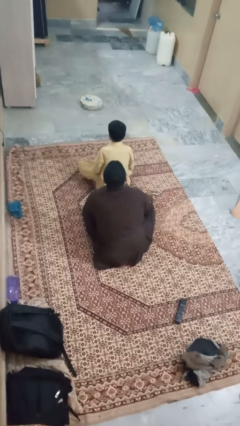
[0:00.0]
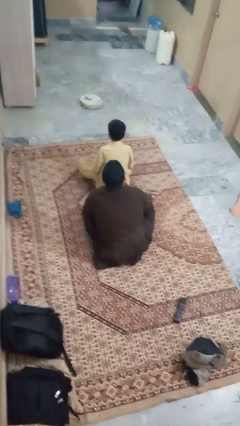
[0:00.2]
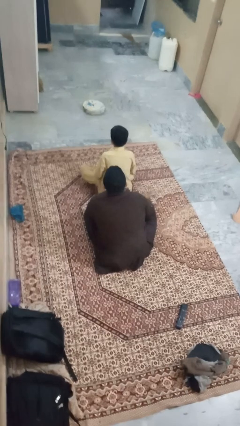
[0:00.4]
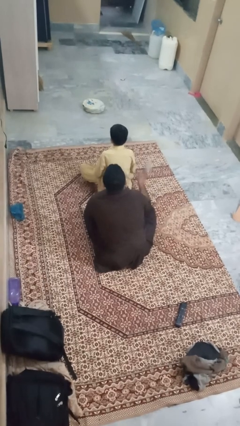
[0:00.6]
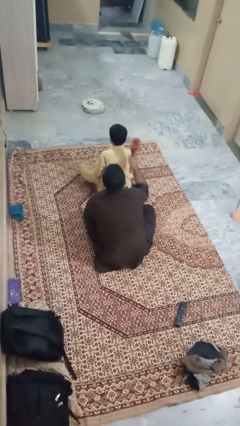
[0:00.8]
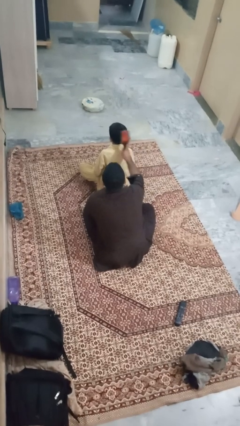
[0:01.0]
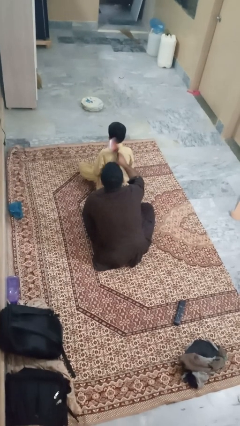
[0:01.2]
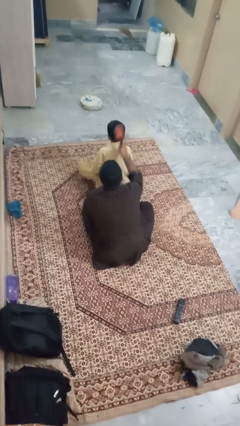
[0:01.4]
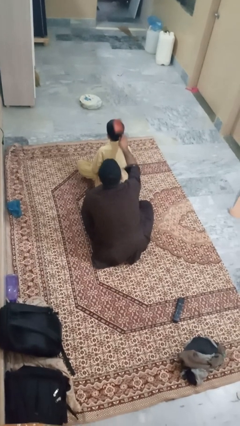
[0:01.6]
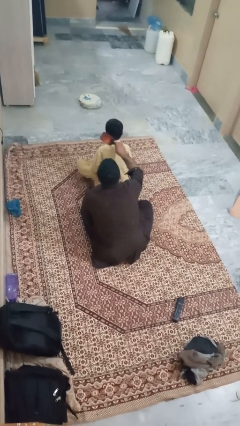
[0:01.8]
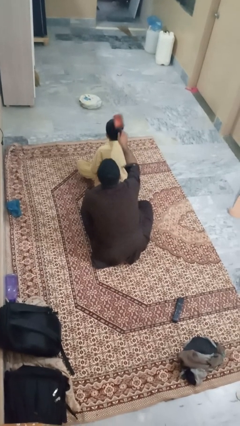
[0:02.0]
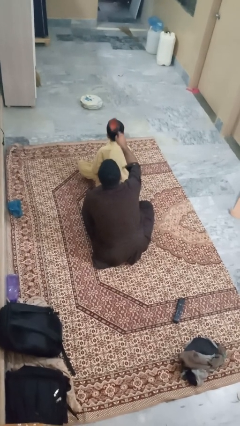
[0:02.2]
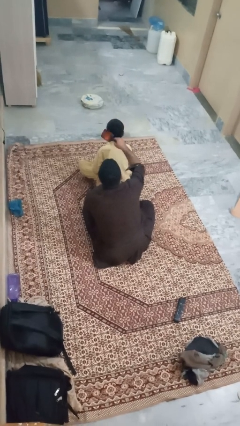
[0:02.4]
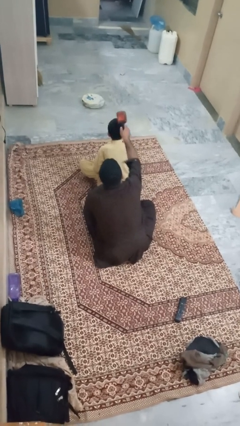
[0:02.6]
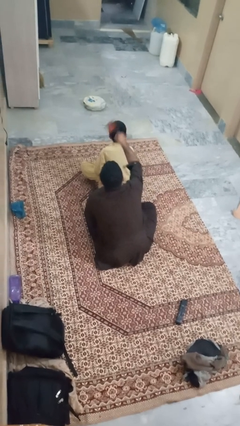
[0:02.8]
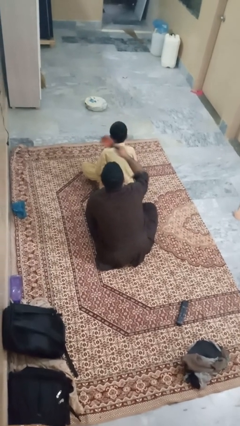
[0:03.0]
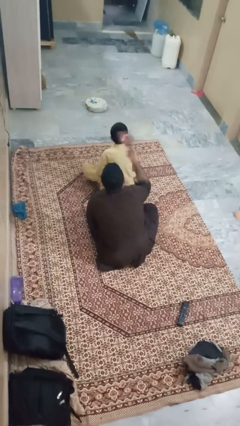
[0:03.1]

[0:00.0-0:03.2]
person brushes hair of person

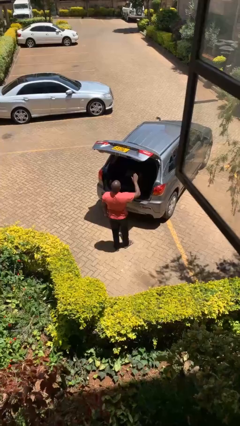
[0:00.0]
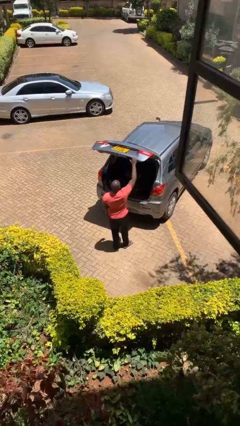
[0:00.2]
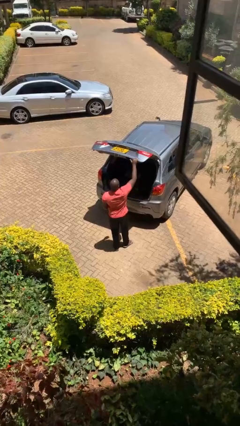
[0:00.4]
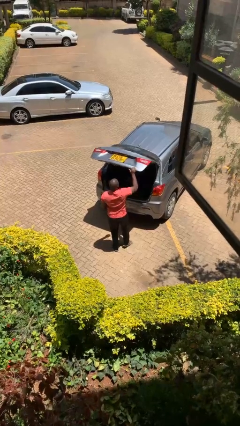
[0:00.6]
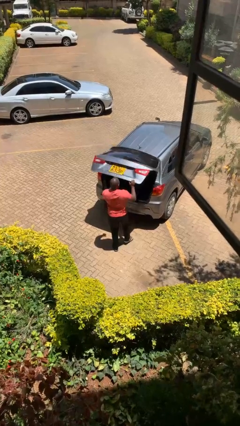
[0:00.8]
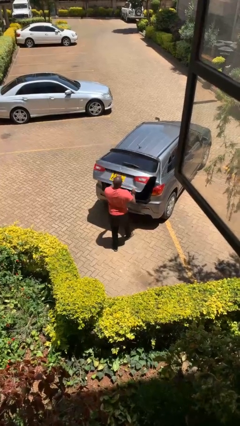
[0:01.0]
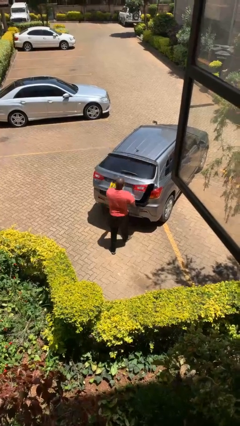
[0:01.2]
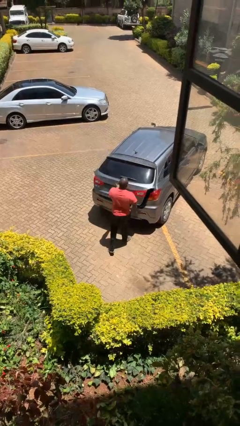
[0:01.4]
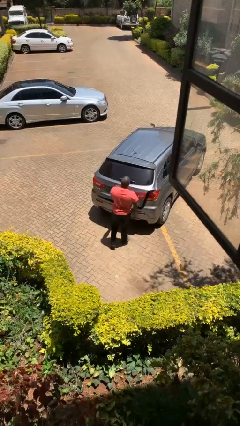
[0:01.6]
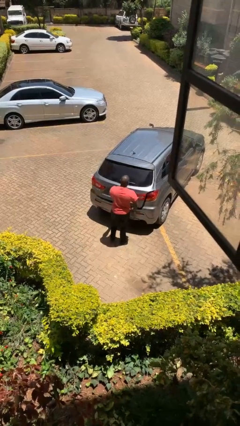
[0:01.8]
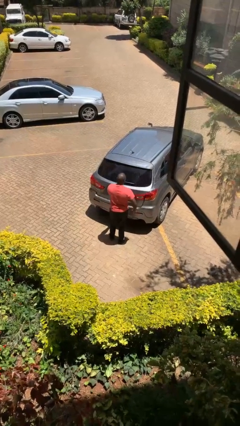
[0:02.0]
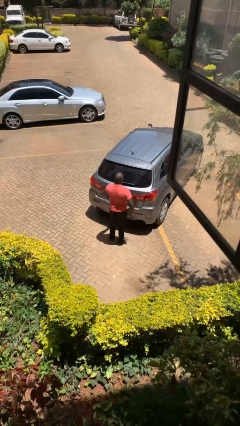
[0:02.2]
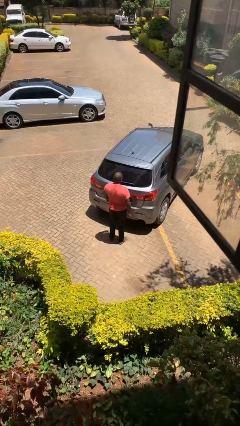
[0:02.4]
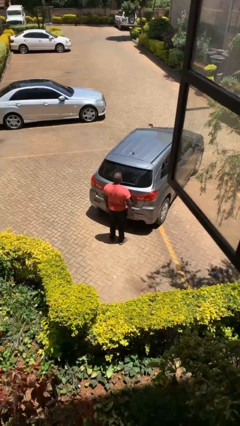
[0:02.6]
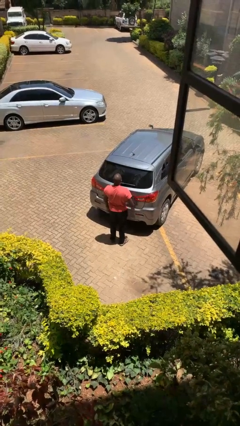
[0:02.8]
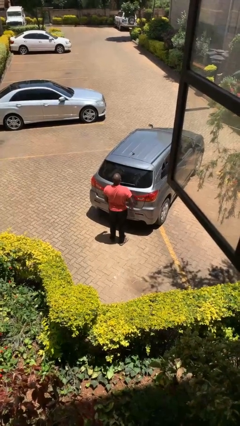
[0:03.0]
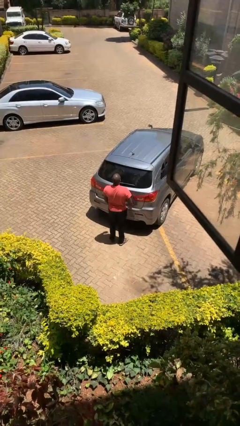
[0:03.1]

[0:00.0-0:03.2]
person closes car trunk

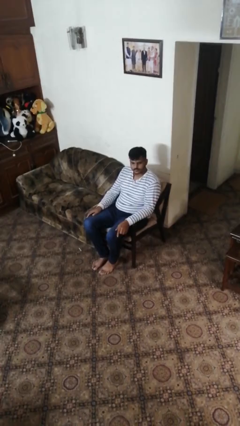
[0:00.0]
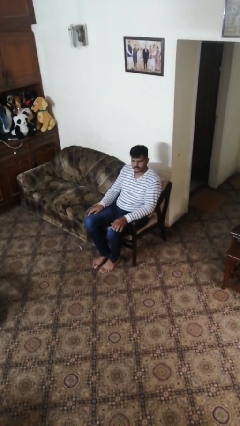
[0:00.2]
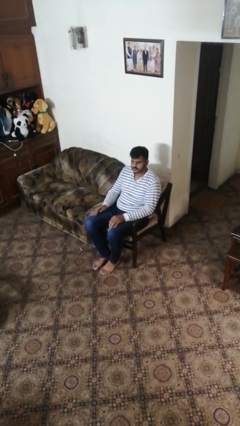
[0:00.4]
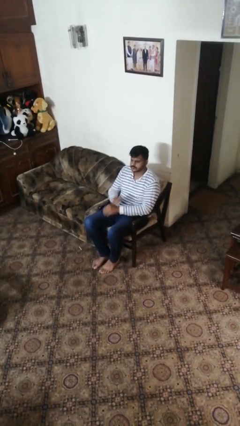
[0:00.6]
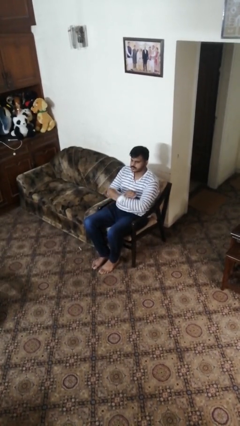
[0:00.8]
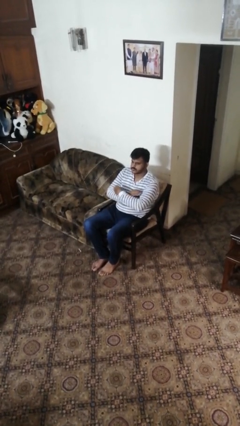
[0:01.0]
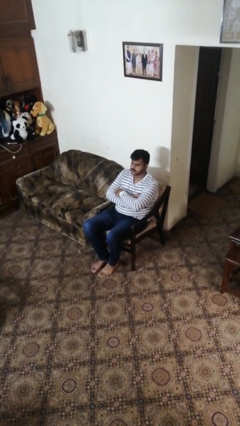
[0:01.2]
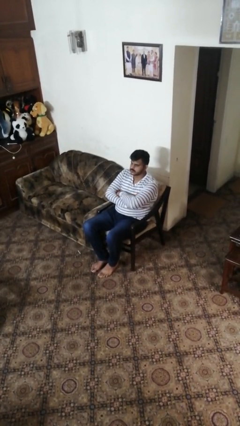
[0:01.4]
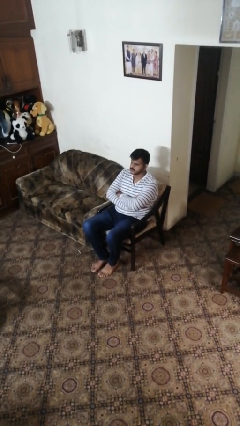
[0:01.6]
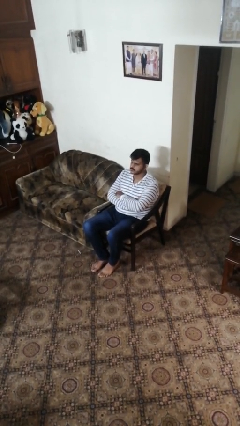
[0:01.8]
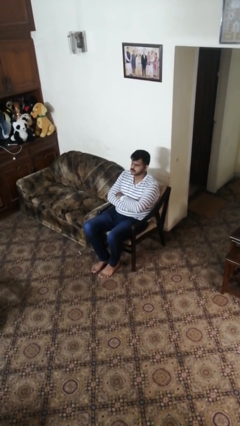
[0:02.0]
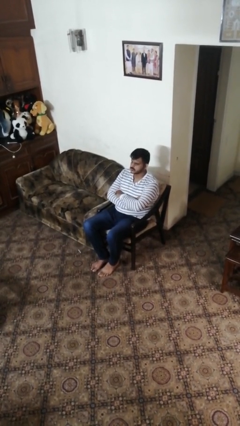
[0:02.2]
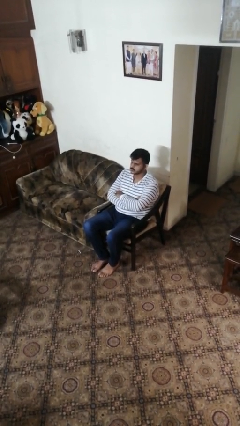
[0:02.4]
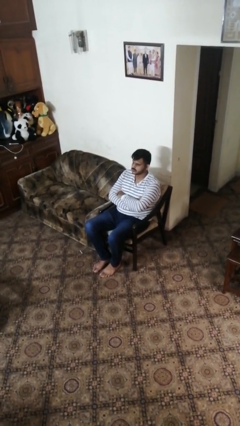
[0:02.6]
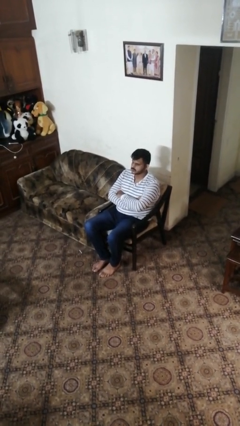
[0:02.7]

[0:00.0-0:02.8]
person crosses arms

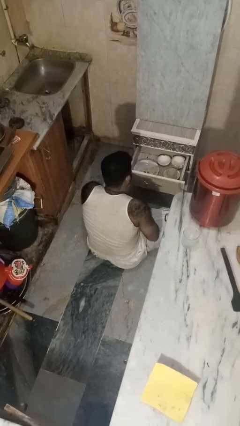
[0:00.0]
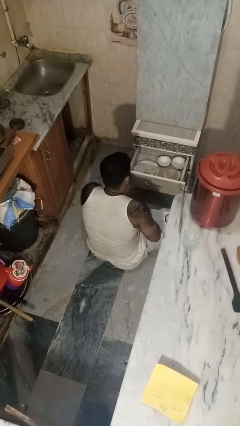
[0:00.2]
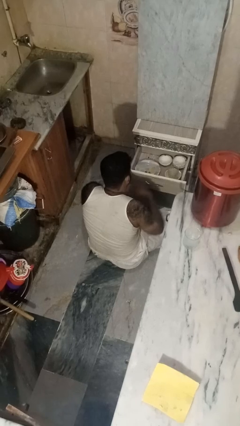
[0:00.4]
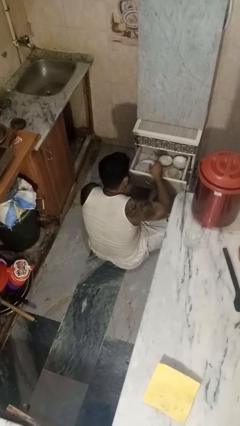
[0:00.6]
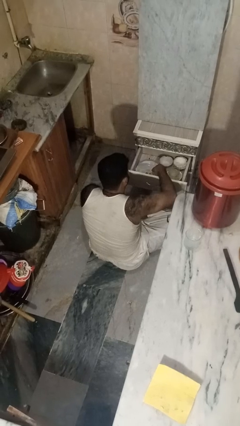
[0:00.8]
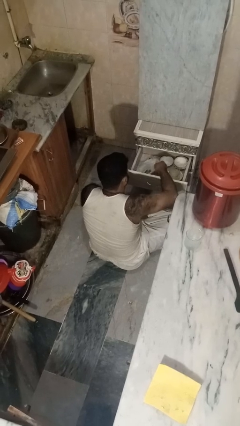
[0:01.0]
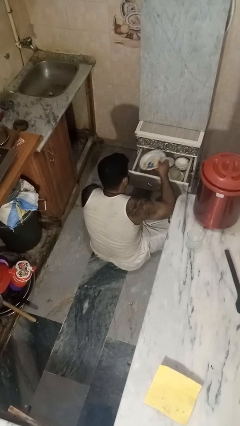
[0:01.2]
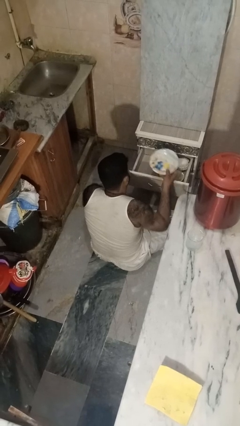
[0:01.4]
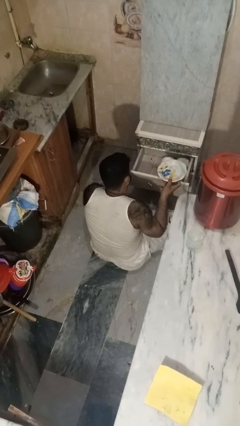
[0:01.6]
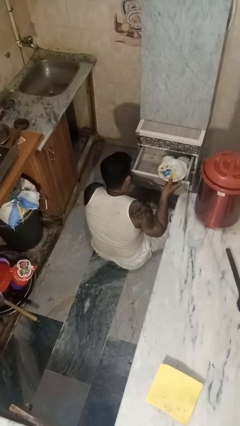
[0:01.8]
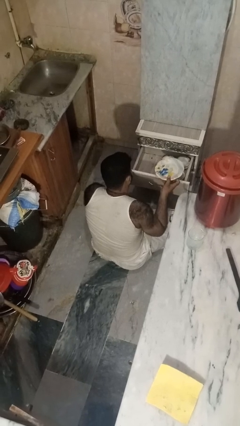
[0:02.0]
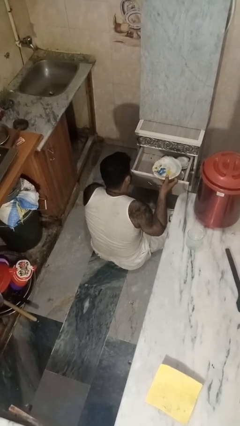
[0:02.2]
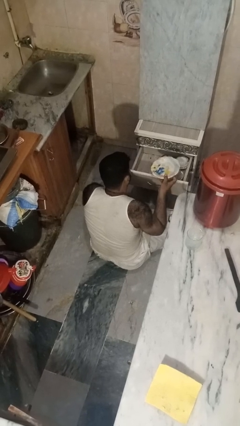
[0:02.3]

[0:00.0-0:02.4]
person takes object from kitchen drawer

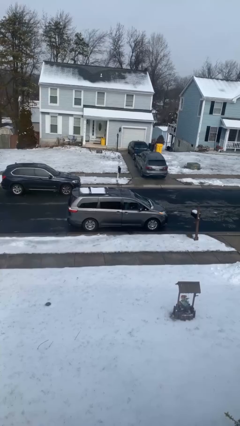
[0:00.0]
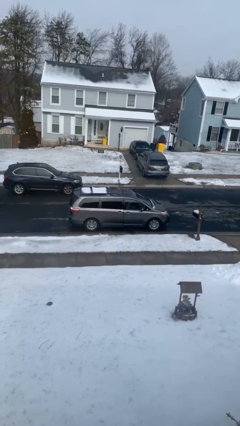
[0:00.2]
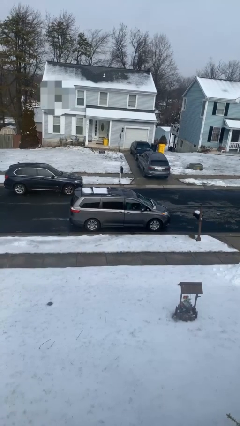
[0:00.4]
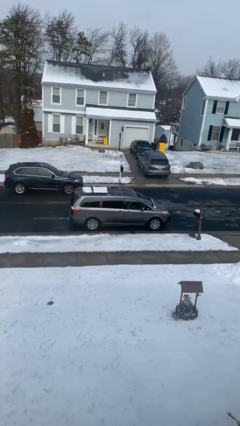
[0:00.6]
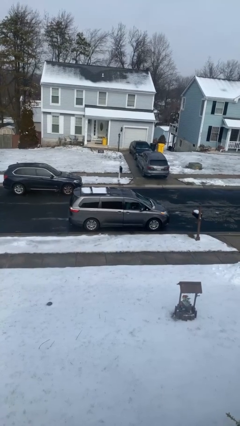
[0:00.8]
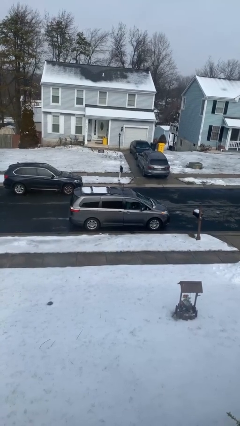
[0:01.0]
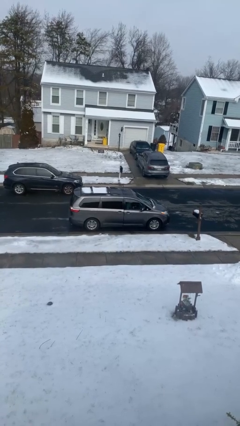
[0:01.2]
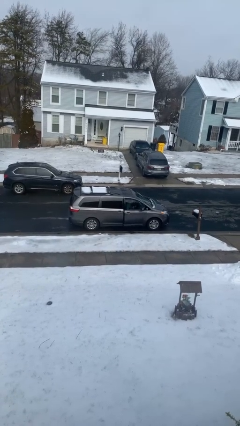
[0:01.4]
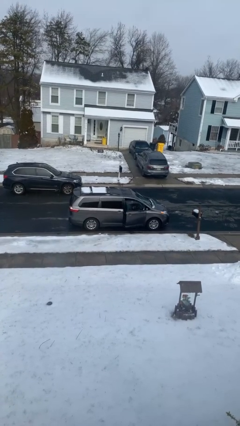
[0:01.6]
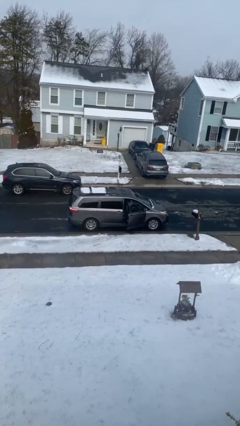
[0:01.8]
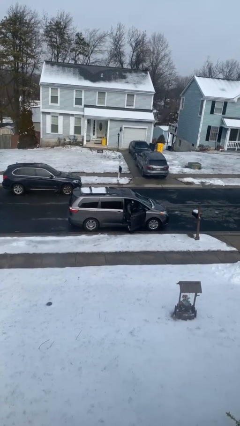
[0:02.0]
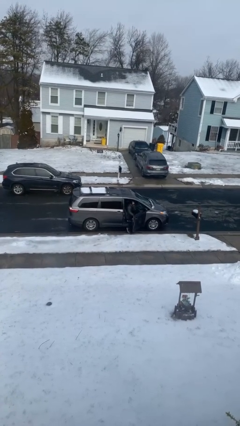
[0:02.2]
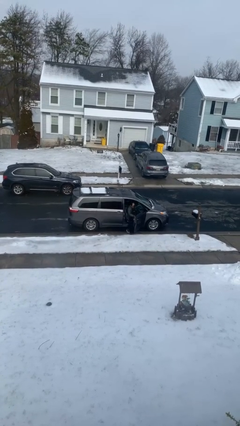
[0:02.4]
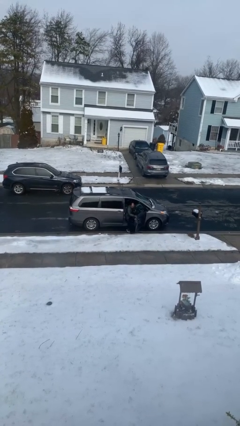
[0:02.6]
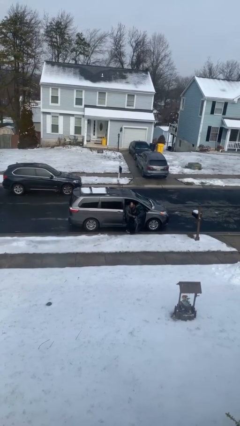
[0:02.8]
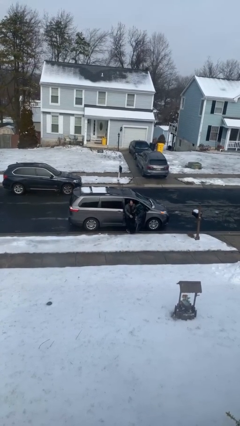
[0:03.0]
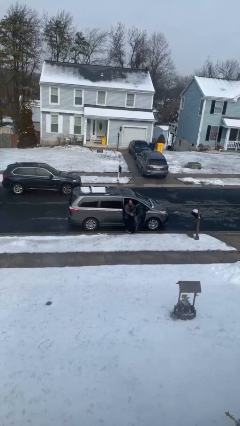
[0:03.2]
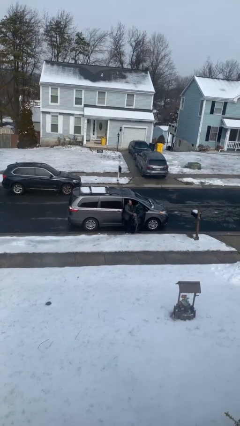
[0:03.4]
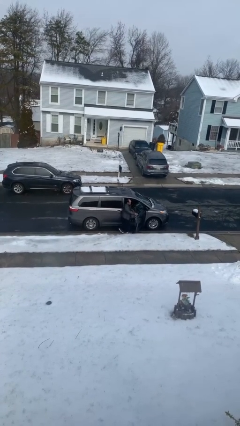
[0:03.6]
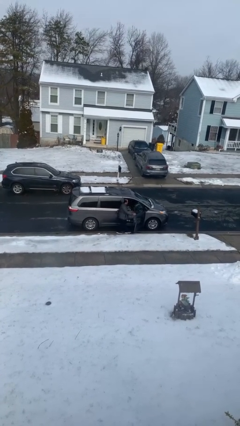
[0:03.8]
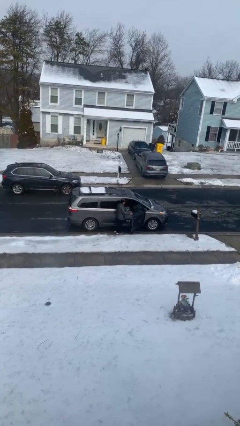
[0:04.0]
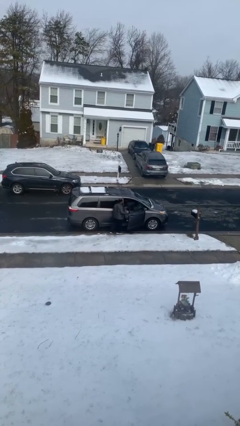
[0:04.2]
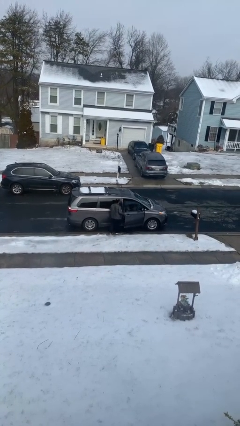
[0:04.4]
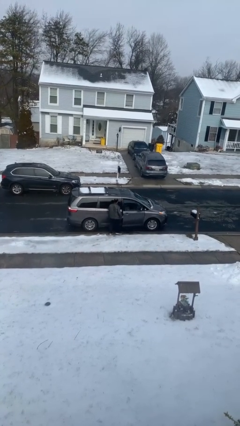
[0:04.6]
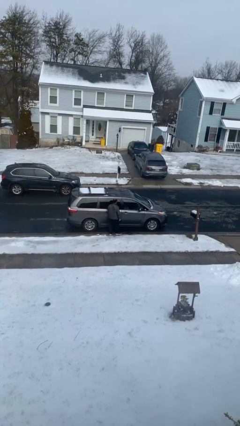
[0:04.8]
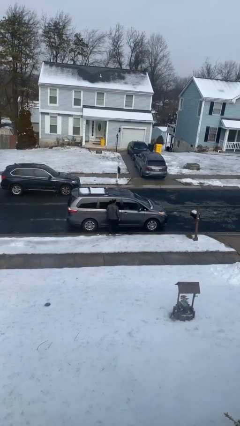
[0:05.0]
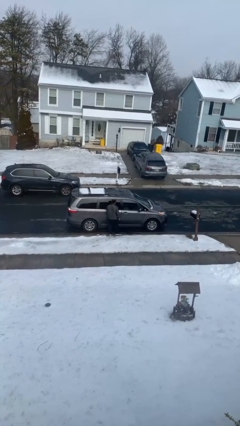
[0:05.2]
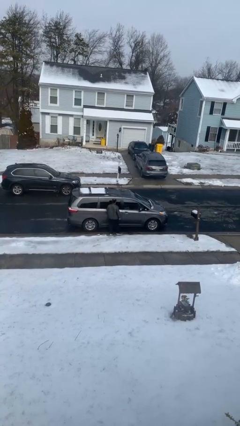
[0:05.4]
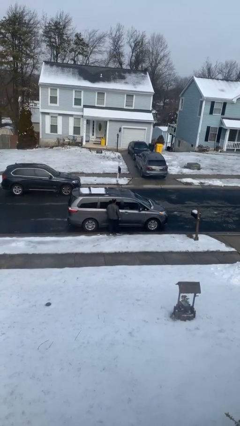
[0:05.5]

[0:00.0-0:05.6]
car drops off person

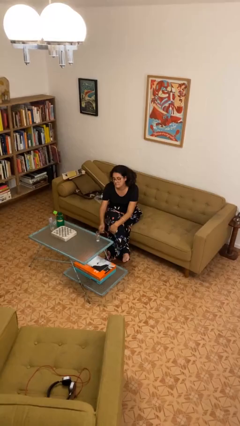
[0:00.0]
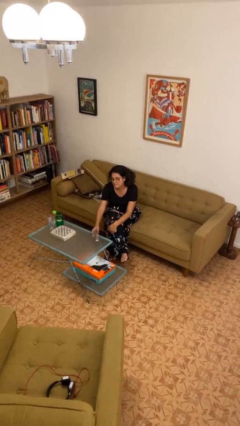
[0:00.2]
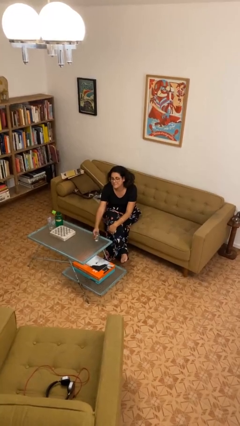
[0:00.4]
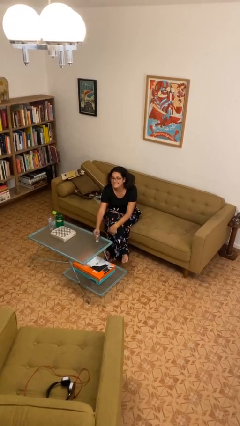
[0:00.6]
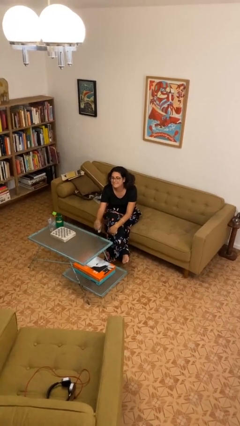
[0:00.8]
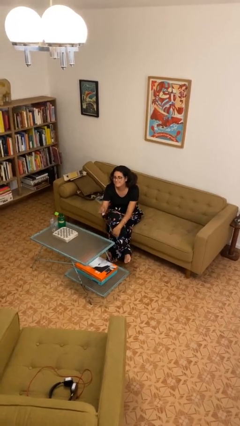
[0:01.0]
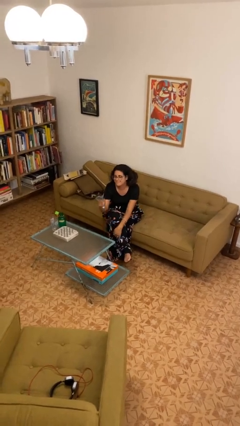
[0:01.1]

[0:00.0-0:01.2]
person picks up object from table
